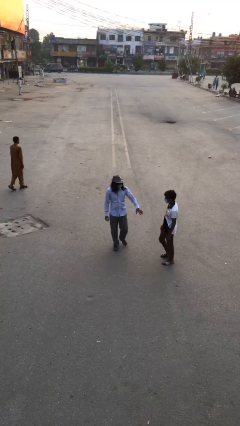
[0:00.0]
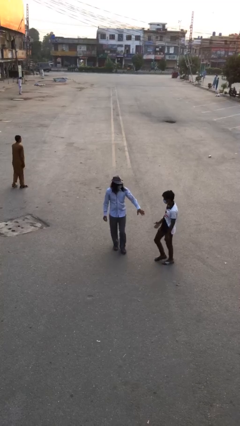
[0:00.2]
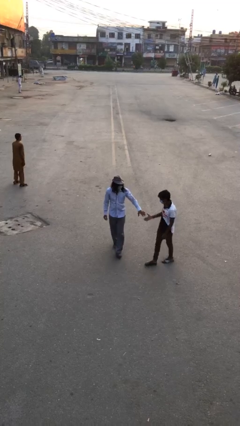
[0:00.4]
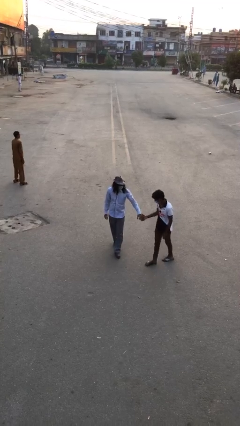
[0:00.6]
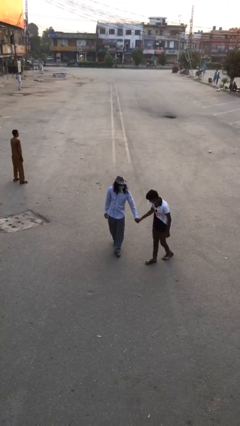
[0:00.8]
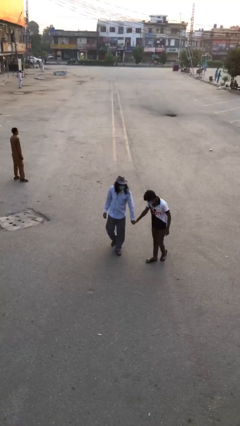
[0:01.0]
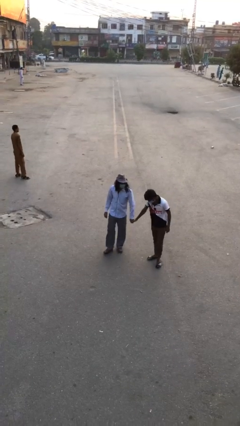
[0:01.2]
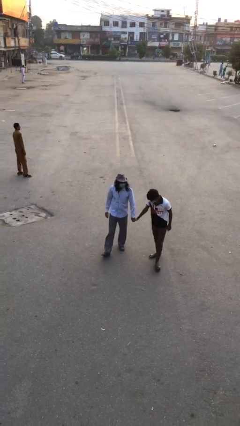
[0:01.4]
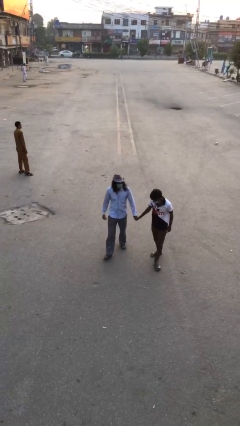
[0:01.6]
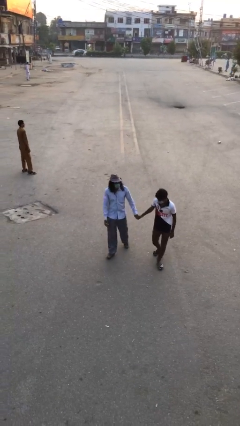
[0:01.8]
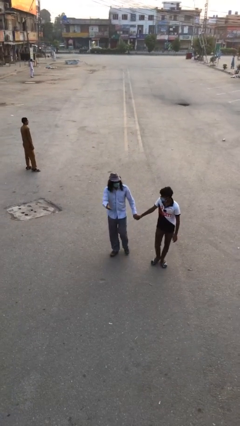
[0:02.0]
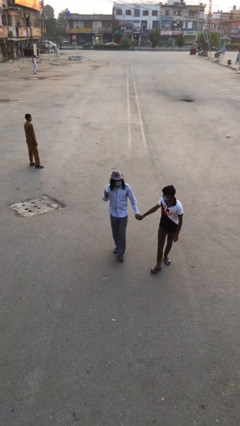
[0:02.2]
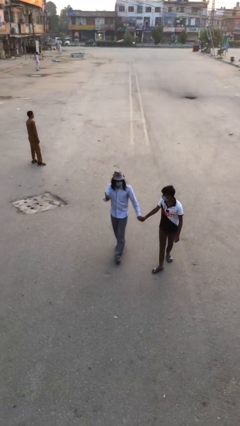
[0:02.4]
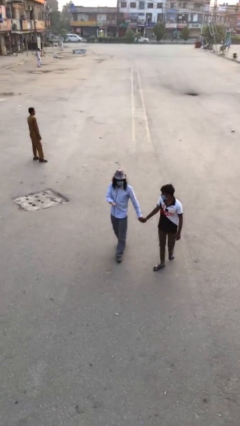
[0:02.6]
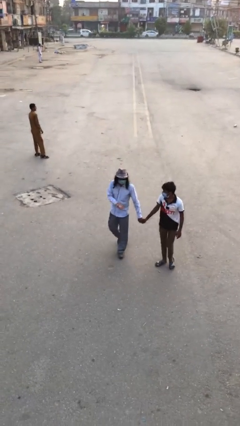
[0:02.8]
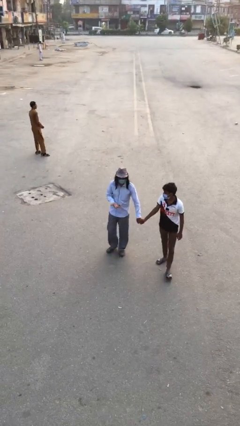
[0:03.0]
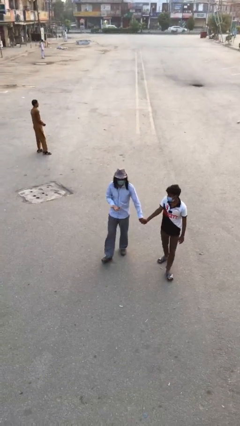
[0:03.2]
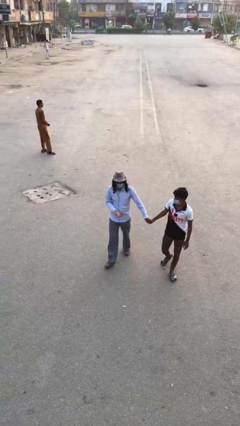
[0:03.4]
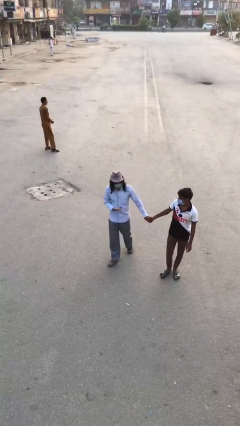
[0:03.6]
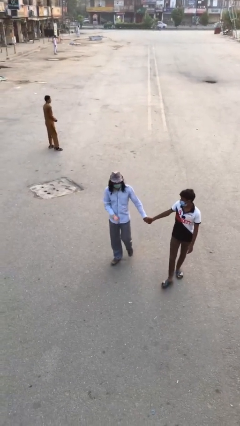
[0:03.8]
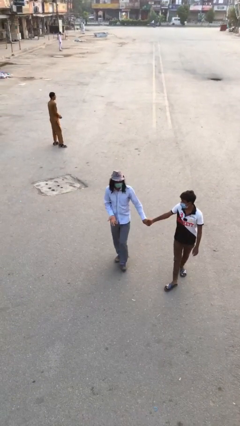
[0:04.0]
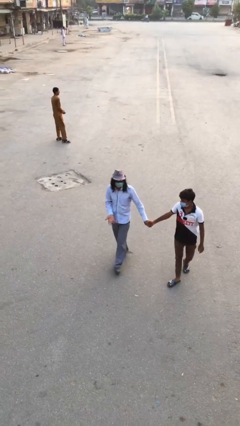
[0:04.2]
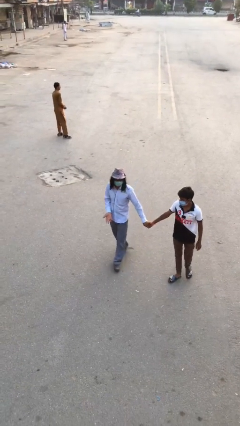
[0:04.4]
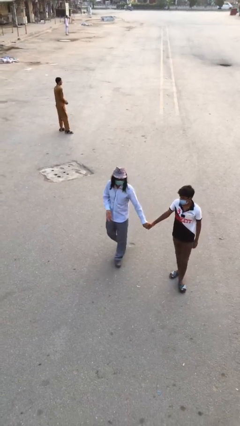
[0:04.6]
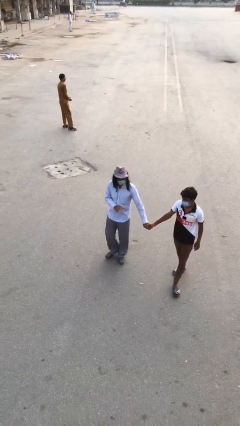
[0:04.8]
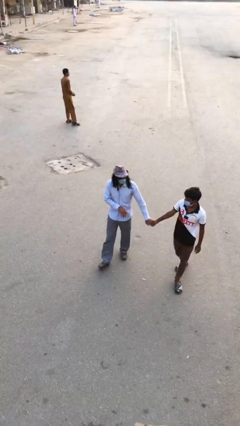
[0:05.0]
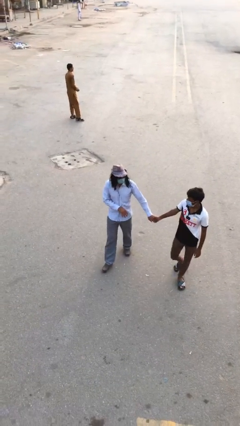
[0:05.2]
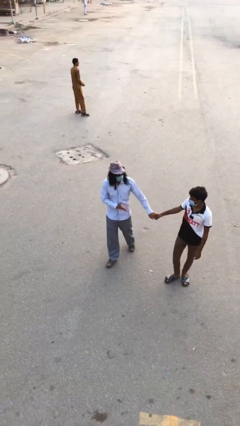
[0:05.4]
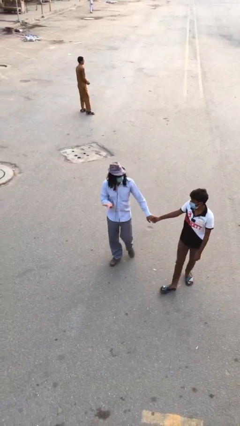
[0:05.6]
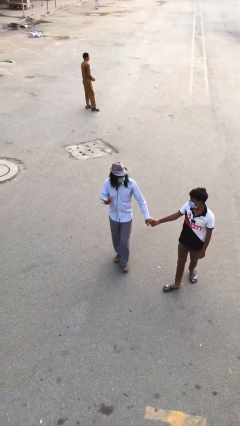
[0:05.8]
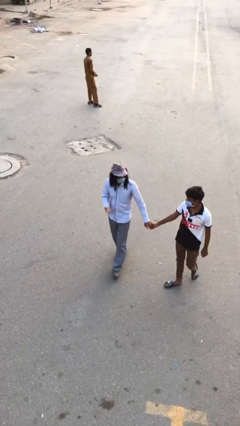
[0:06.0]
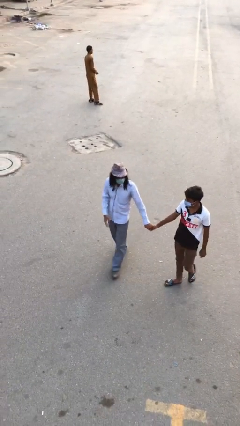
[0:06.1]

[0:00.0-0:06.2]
person holds hand

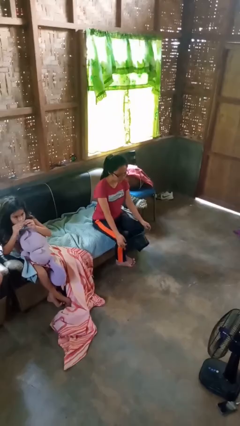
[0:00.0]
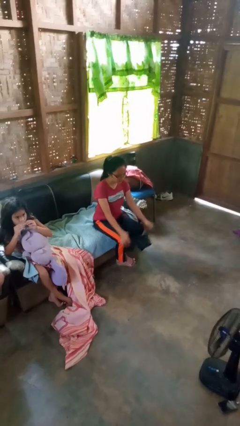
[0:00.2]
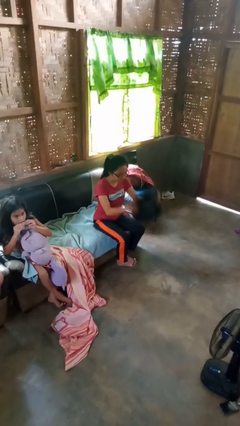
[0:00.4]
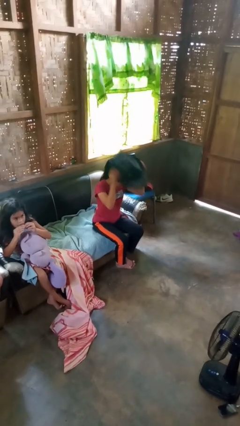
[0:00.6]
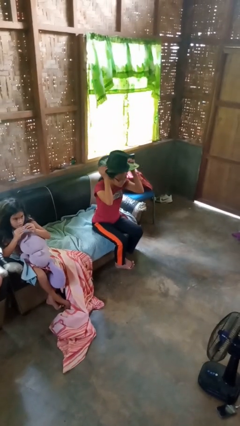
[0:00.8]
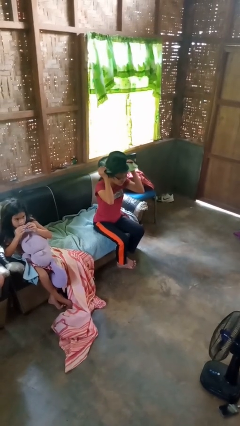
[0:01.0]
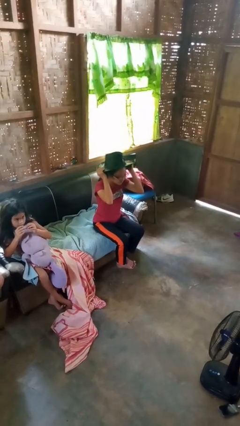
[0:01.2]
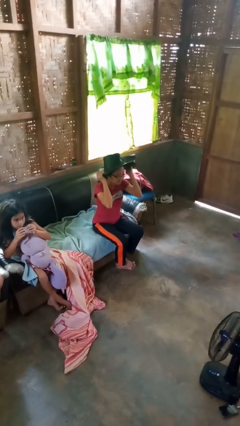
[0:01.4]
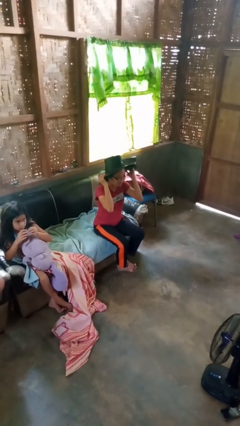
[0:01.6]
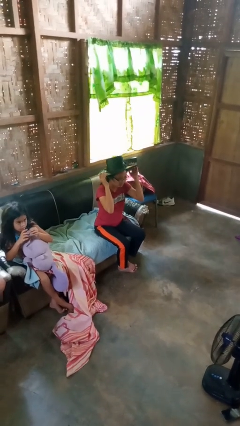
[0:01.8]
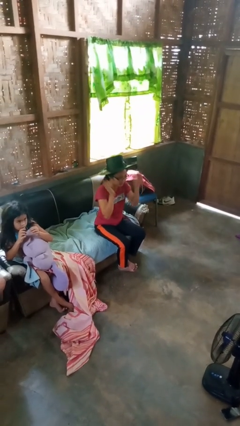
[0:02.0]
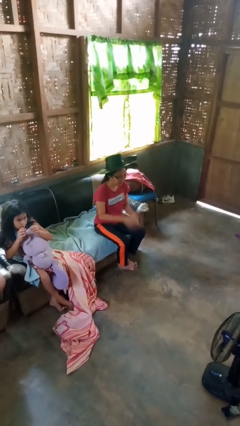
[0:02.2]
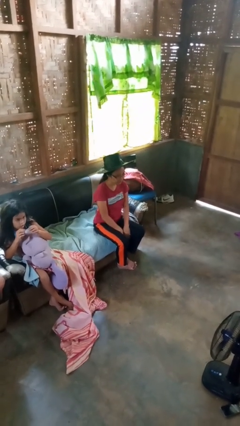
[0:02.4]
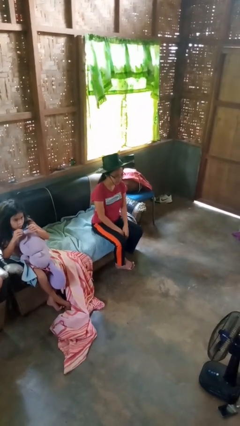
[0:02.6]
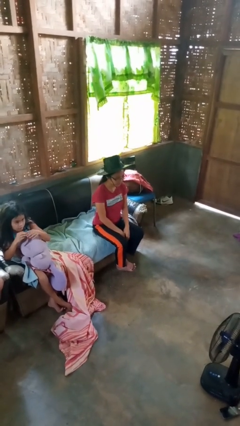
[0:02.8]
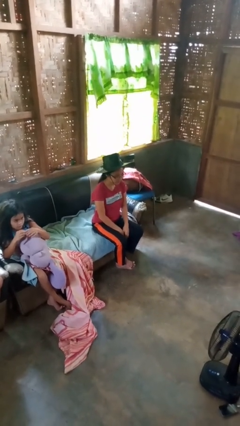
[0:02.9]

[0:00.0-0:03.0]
person puts on hat

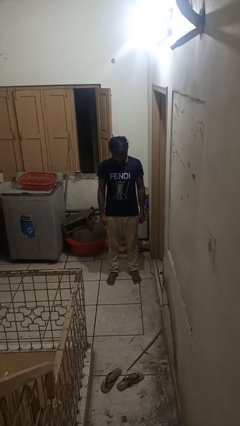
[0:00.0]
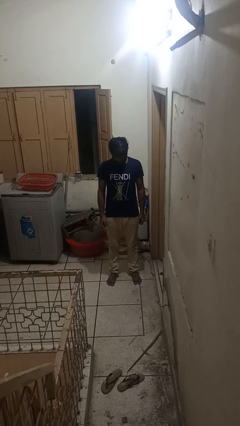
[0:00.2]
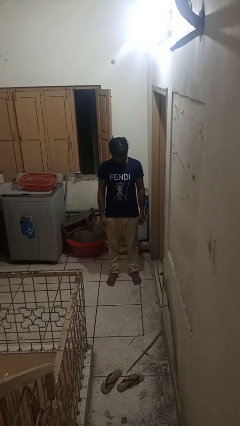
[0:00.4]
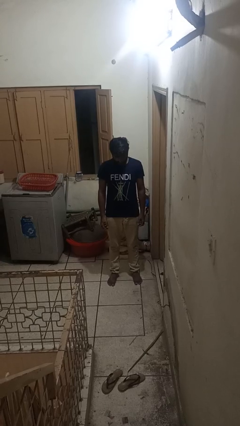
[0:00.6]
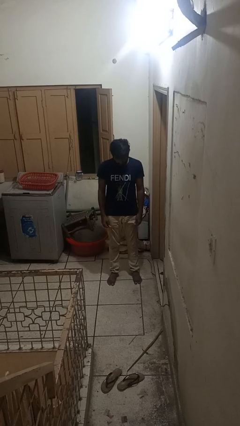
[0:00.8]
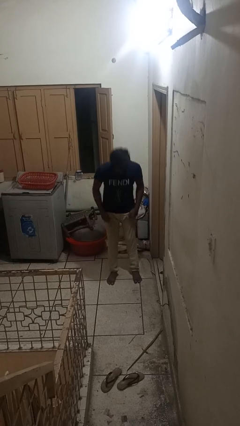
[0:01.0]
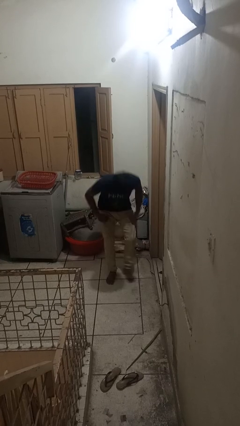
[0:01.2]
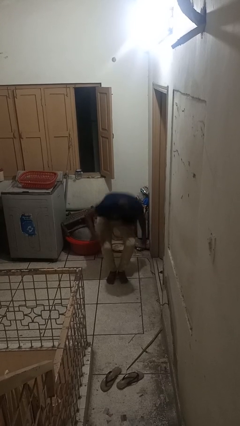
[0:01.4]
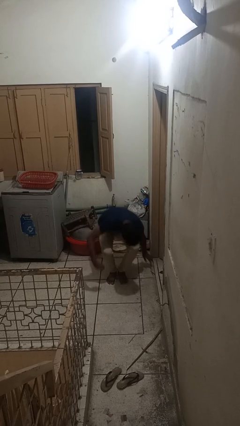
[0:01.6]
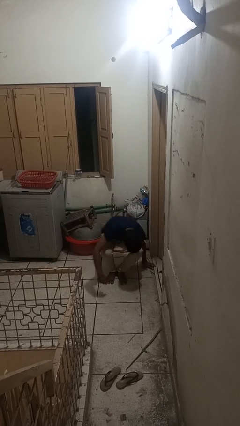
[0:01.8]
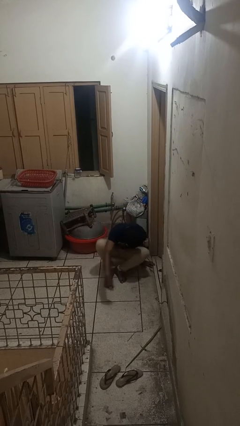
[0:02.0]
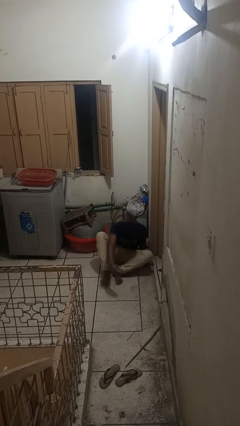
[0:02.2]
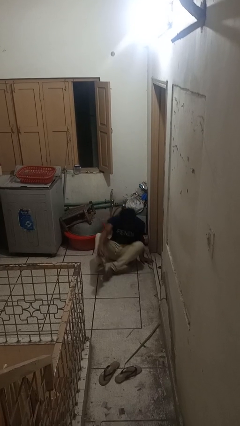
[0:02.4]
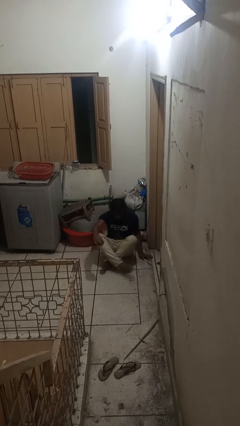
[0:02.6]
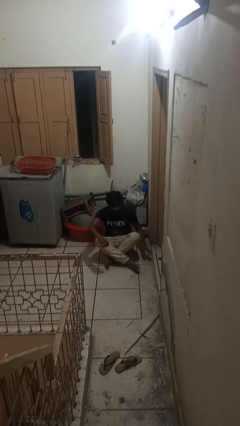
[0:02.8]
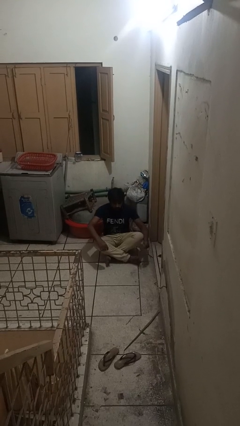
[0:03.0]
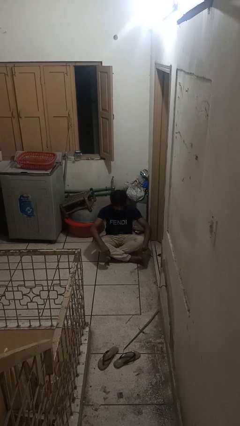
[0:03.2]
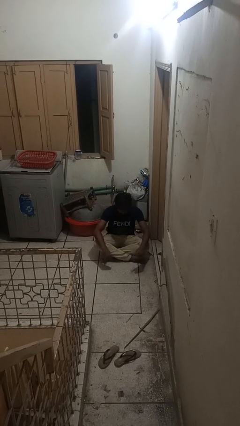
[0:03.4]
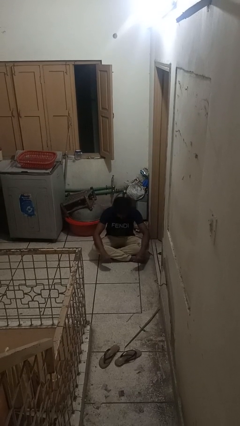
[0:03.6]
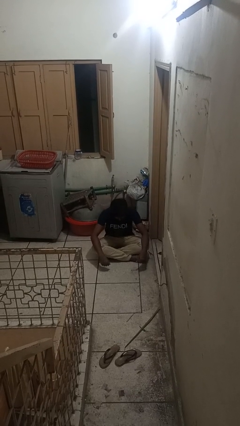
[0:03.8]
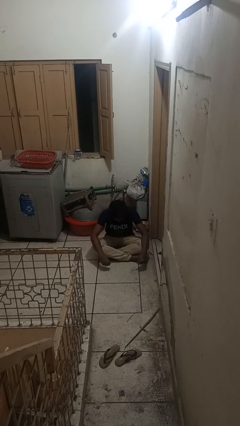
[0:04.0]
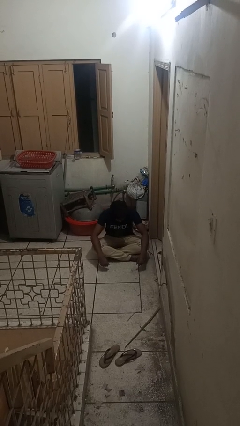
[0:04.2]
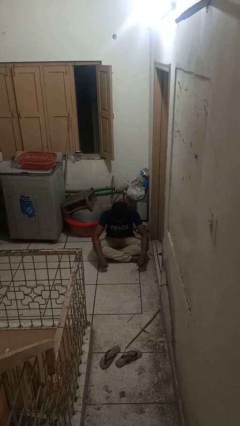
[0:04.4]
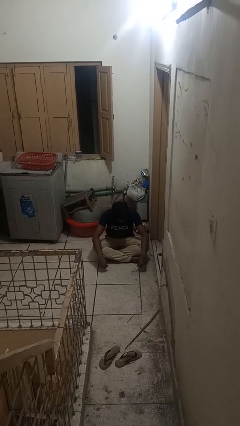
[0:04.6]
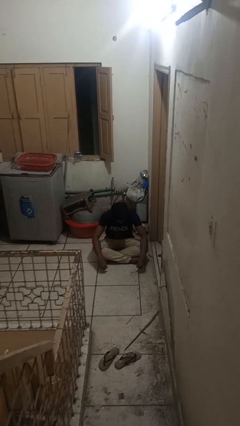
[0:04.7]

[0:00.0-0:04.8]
person sits crisscross

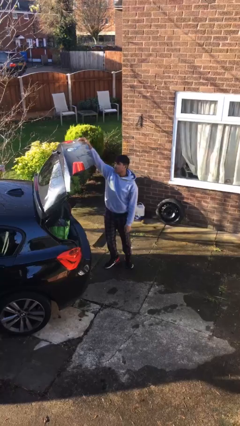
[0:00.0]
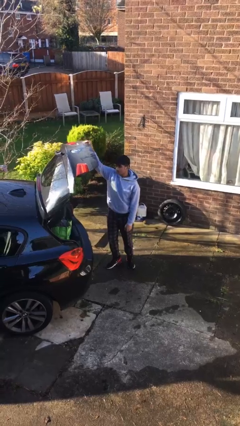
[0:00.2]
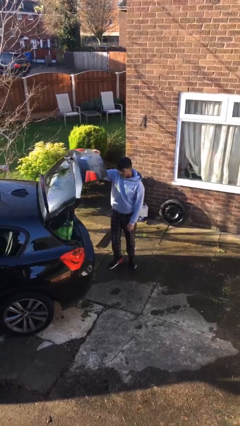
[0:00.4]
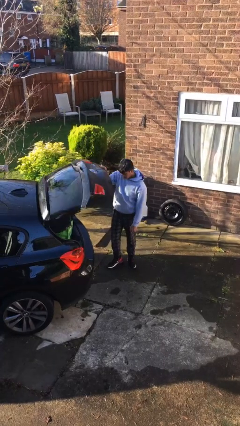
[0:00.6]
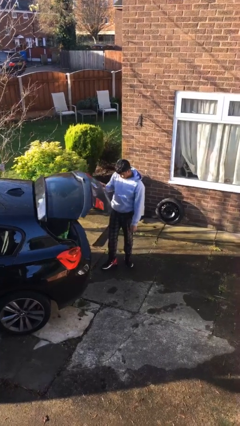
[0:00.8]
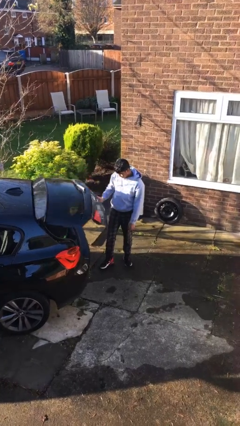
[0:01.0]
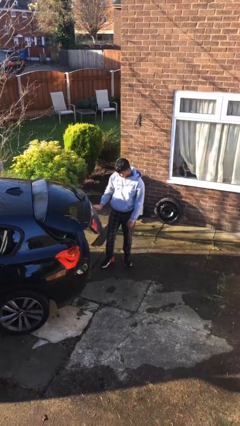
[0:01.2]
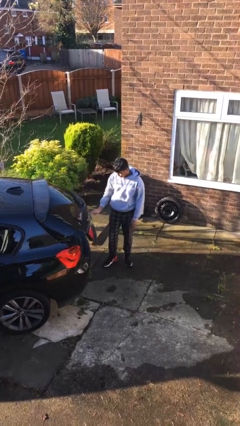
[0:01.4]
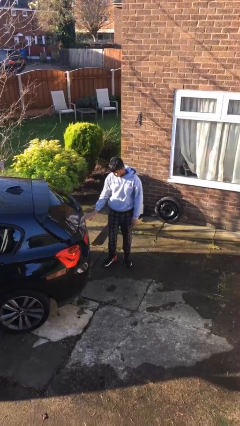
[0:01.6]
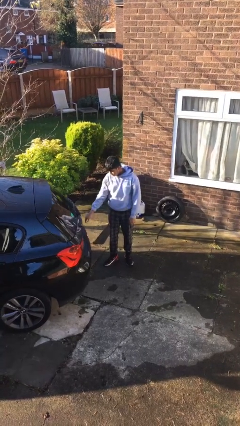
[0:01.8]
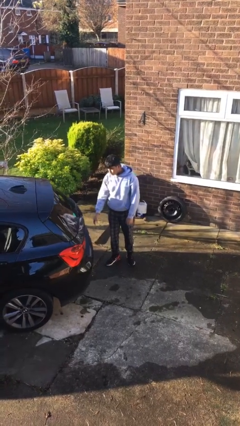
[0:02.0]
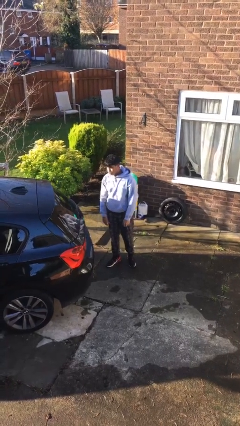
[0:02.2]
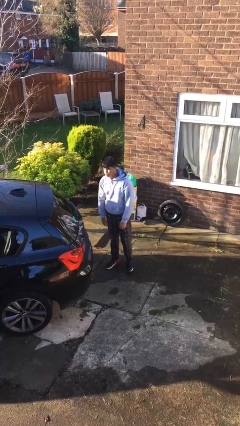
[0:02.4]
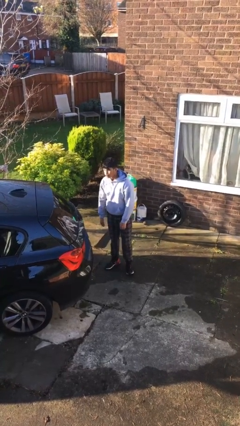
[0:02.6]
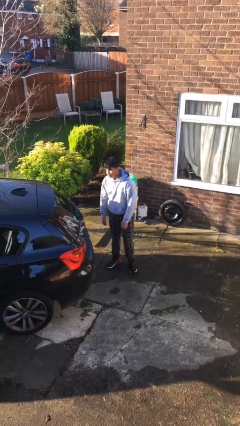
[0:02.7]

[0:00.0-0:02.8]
person closes car trunk

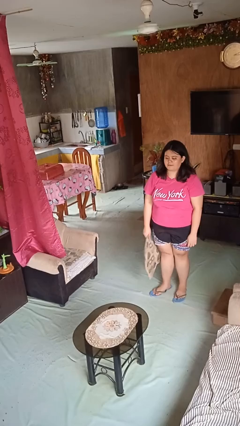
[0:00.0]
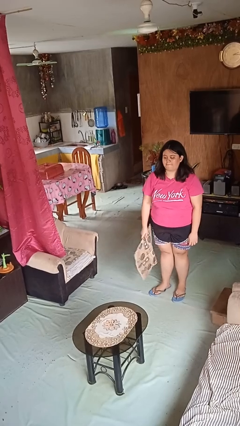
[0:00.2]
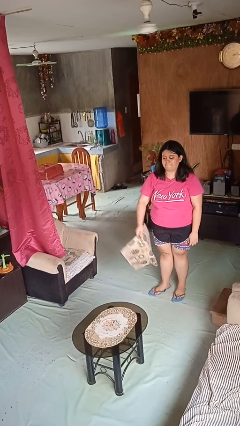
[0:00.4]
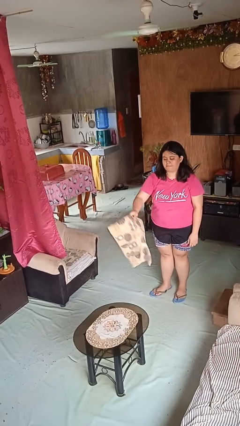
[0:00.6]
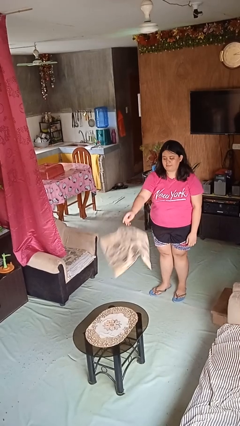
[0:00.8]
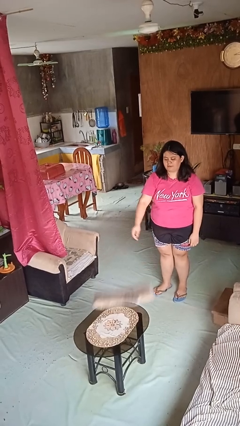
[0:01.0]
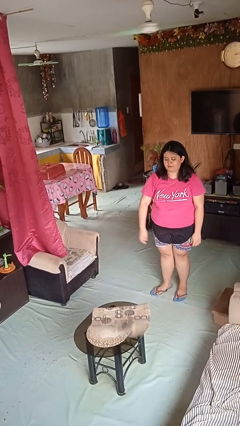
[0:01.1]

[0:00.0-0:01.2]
person throws object on table
